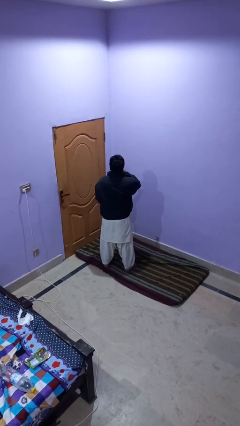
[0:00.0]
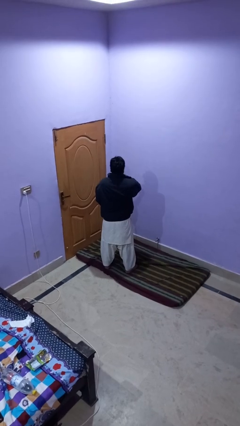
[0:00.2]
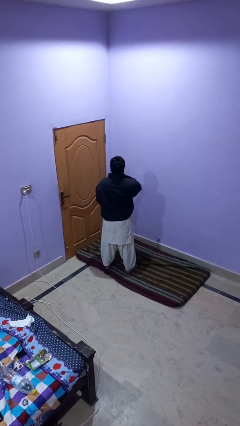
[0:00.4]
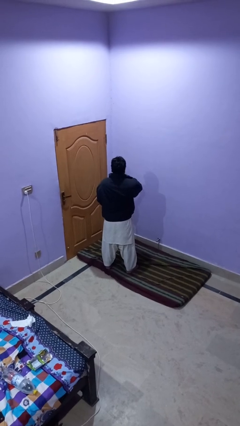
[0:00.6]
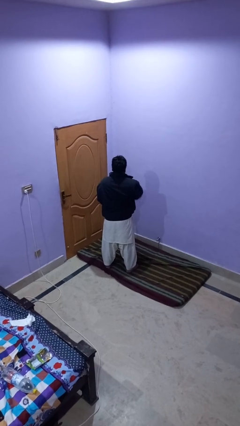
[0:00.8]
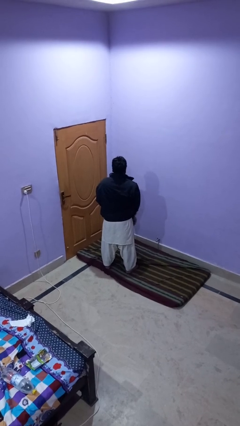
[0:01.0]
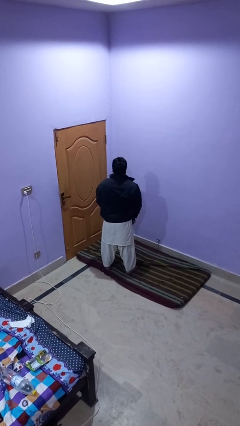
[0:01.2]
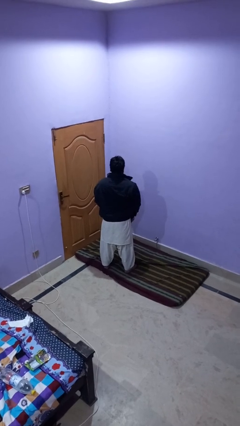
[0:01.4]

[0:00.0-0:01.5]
person unzips jacket

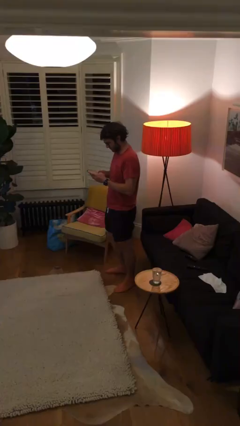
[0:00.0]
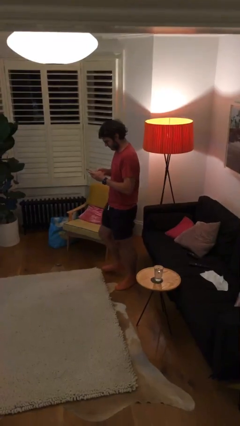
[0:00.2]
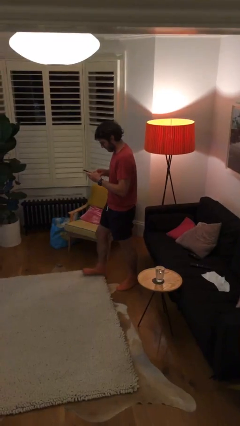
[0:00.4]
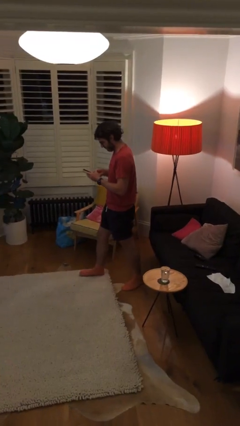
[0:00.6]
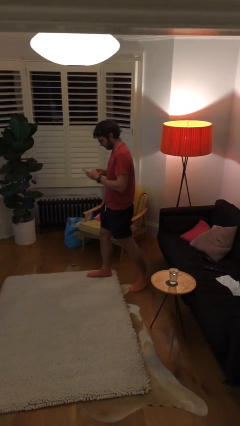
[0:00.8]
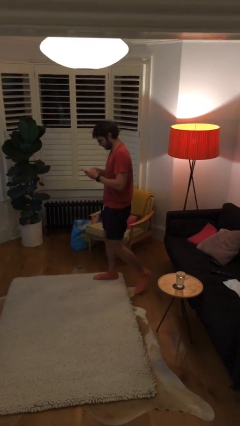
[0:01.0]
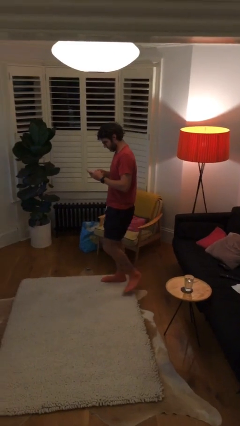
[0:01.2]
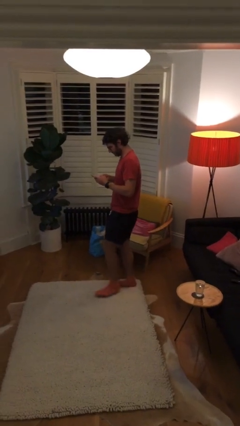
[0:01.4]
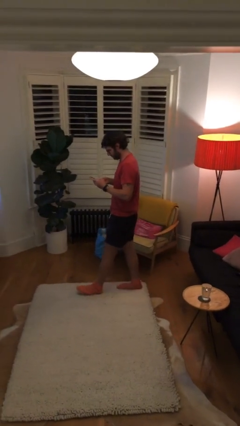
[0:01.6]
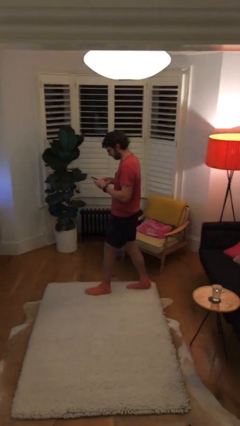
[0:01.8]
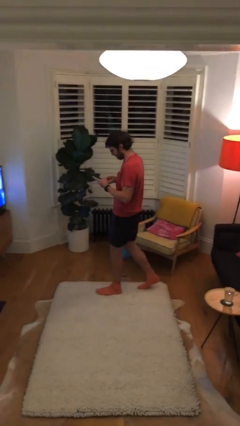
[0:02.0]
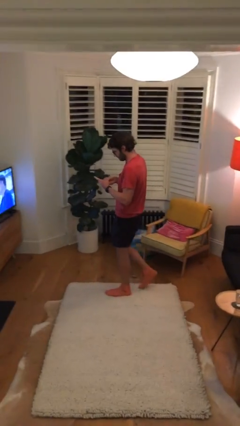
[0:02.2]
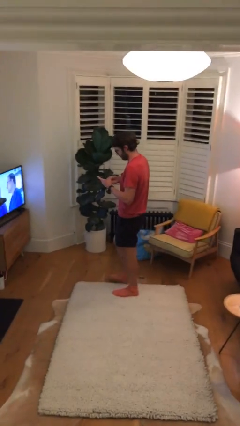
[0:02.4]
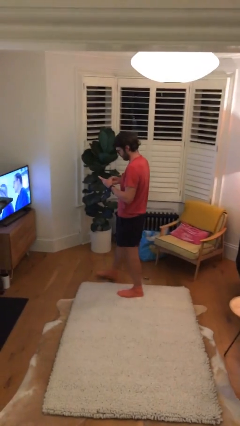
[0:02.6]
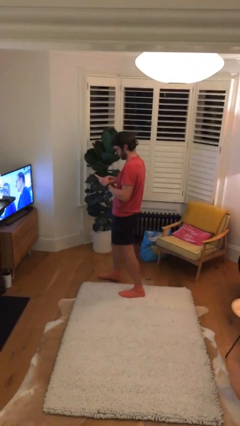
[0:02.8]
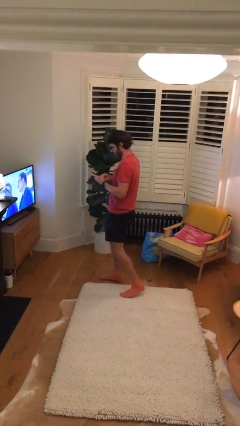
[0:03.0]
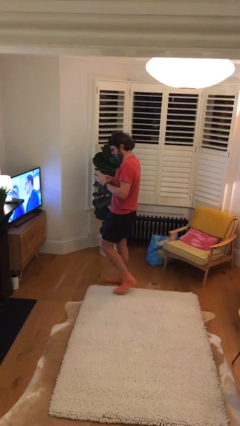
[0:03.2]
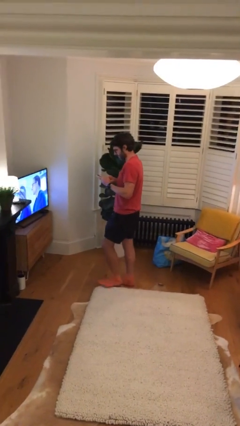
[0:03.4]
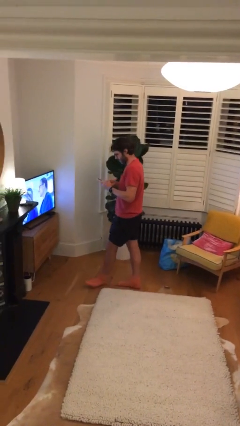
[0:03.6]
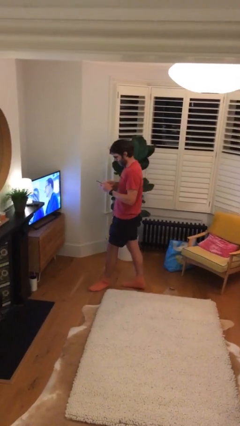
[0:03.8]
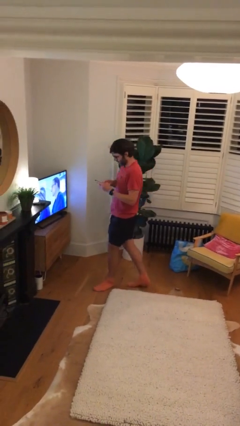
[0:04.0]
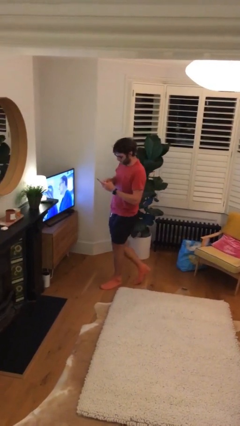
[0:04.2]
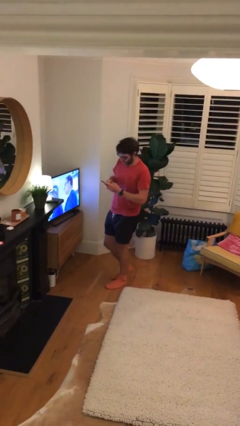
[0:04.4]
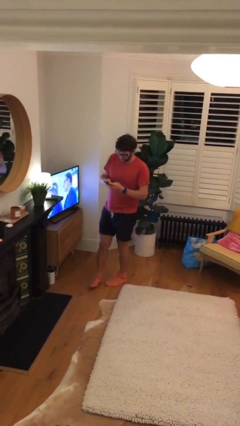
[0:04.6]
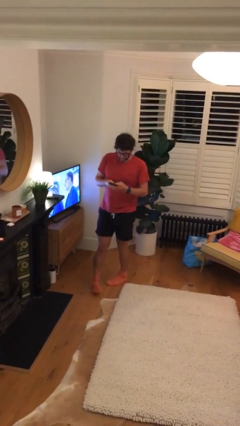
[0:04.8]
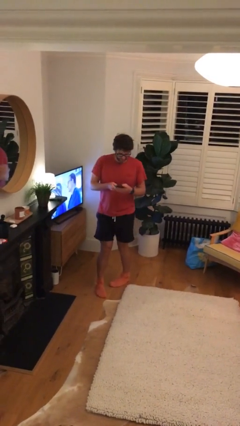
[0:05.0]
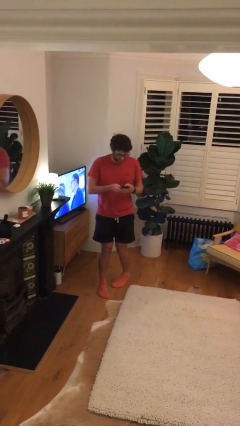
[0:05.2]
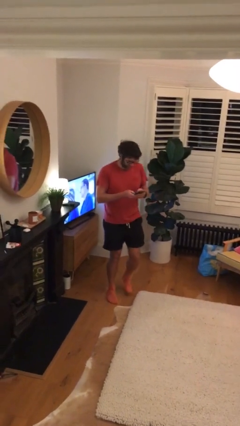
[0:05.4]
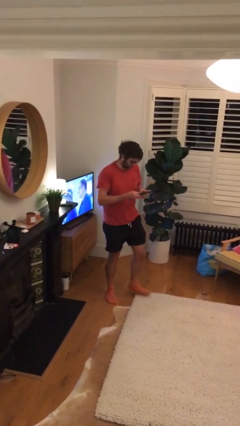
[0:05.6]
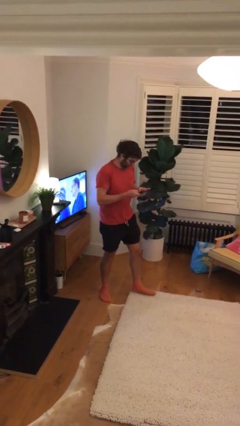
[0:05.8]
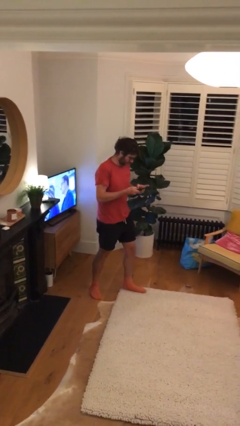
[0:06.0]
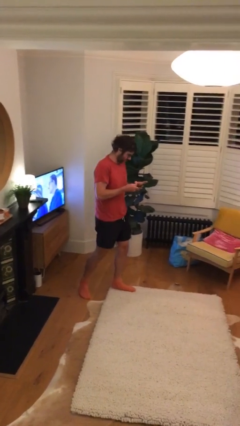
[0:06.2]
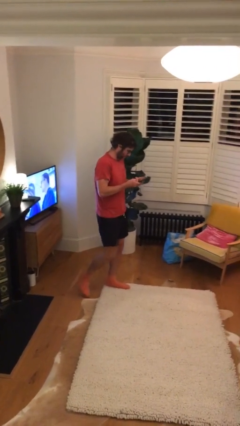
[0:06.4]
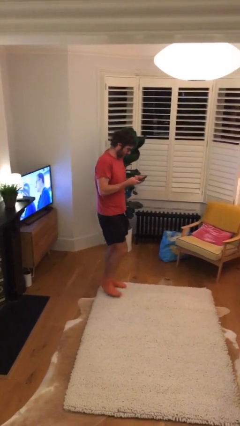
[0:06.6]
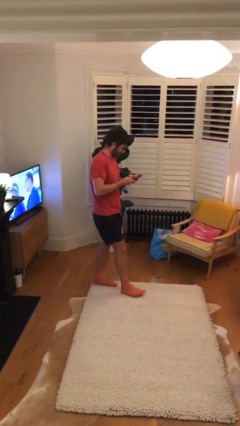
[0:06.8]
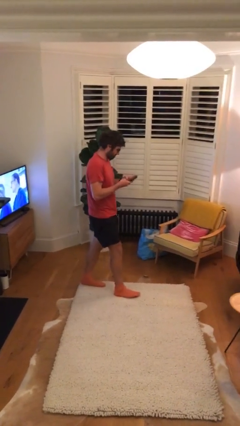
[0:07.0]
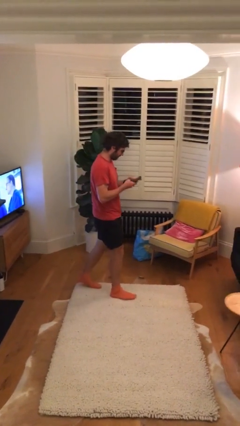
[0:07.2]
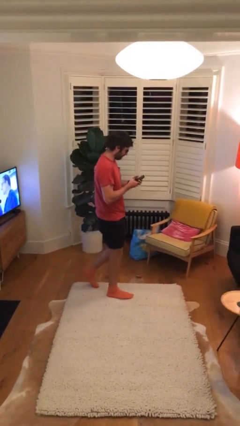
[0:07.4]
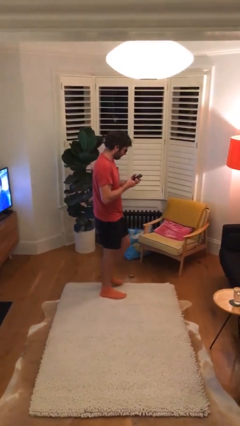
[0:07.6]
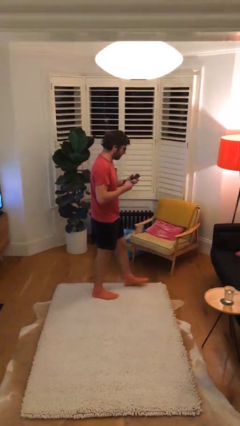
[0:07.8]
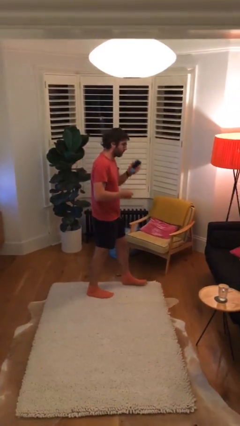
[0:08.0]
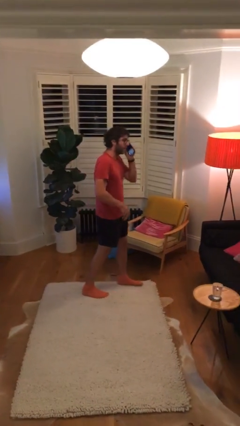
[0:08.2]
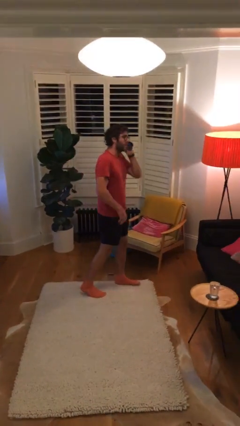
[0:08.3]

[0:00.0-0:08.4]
person texts on phone

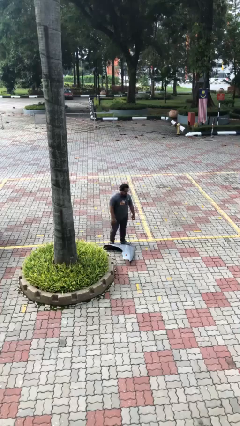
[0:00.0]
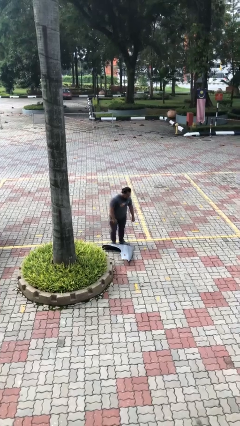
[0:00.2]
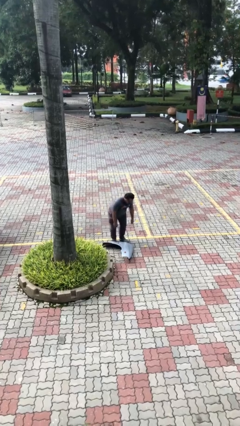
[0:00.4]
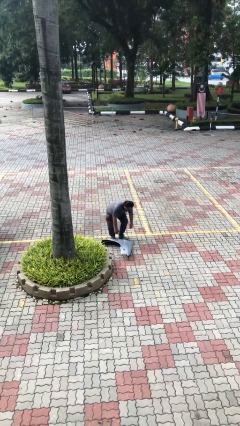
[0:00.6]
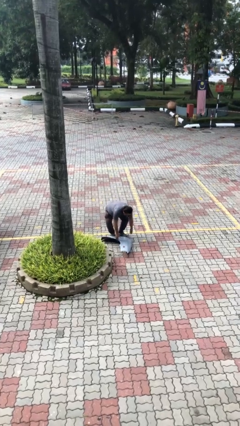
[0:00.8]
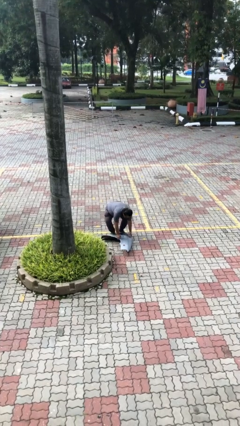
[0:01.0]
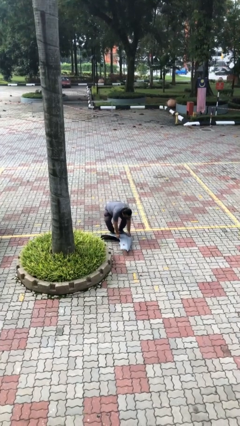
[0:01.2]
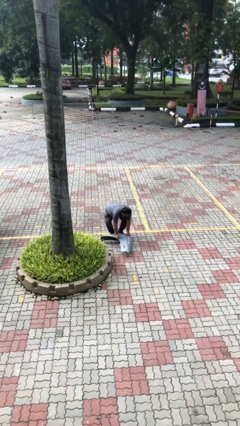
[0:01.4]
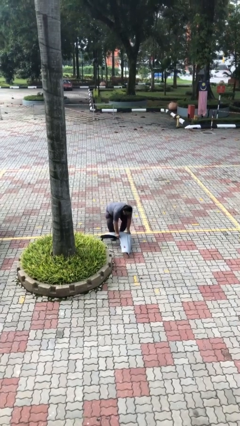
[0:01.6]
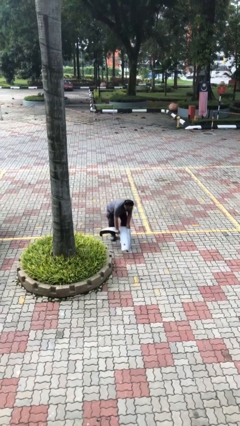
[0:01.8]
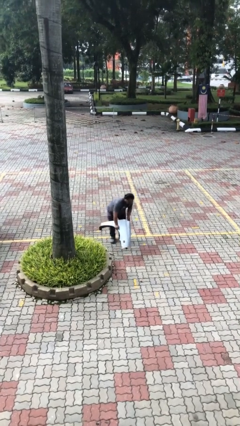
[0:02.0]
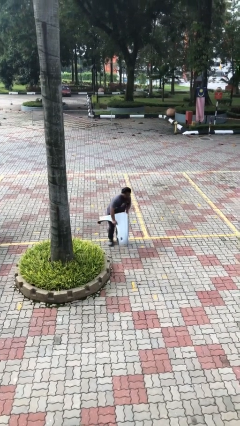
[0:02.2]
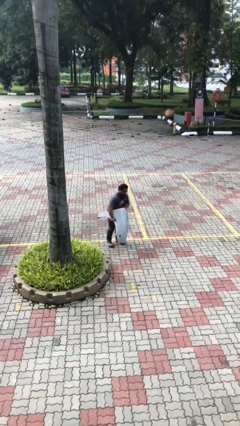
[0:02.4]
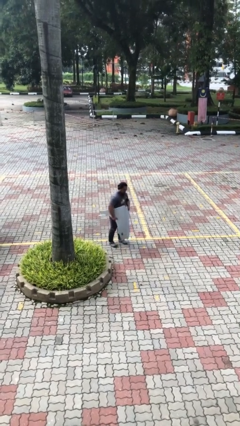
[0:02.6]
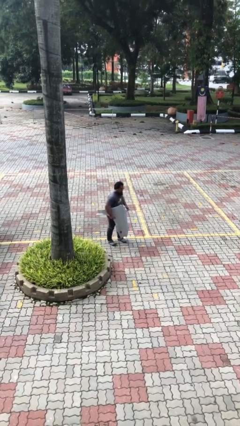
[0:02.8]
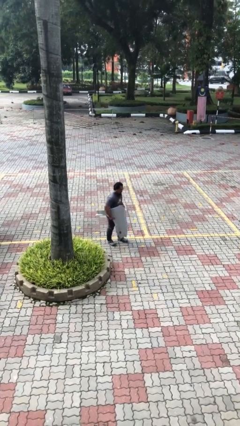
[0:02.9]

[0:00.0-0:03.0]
person picks up object from floor

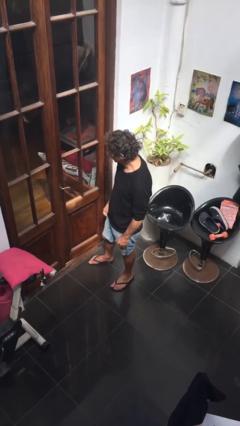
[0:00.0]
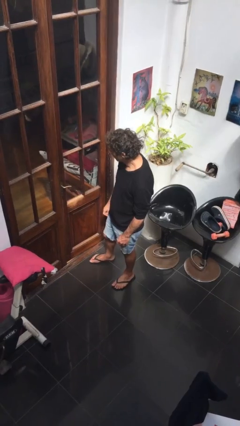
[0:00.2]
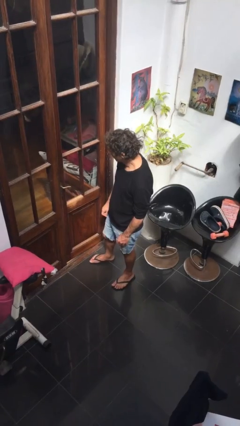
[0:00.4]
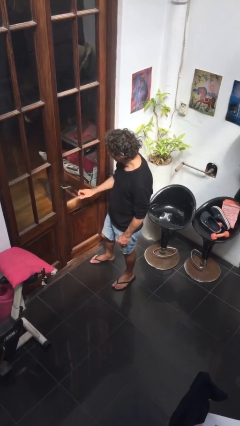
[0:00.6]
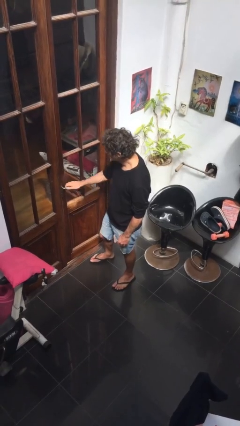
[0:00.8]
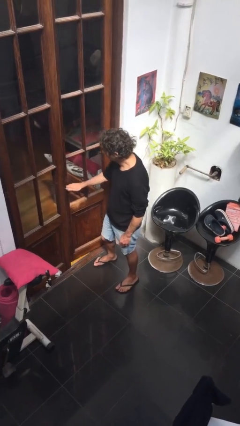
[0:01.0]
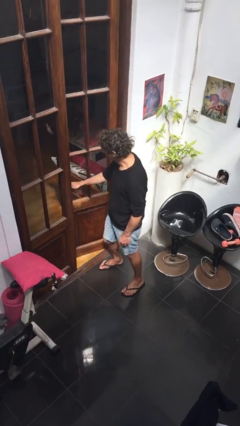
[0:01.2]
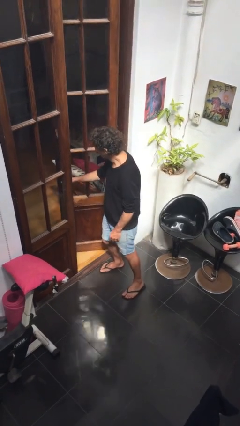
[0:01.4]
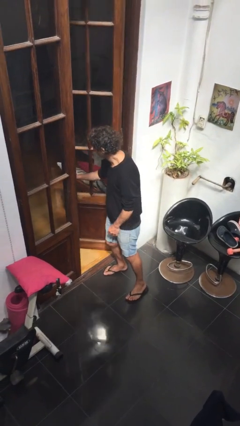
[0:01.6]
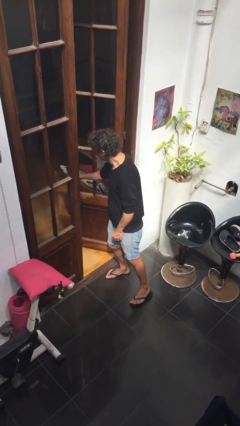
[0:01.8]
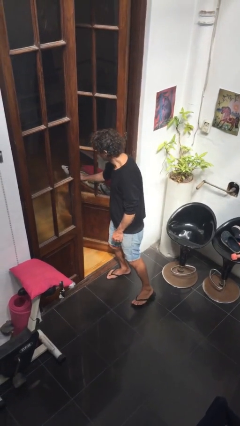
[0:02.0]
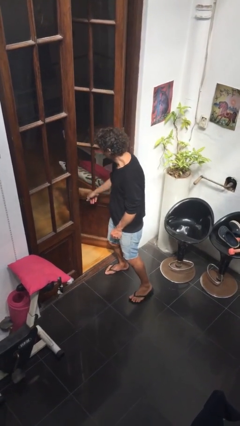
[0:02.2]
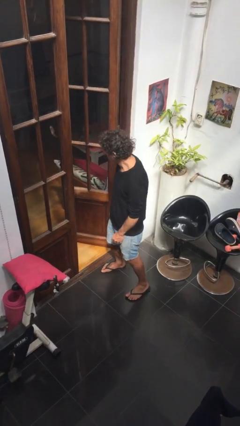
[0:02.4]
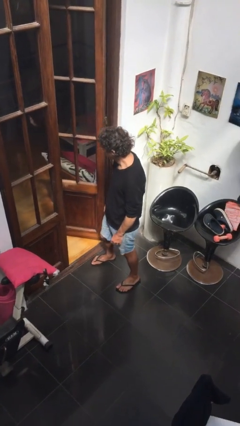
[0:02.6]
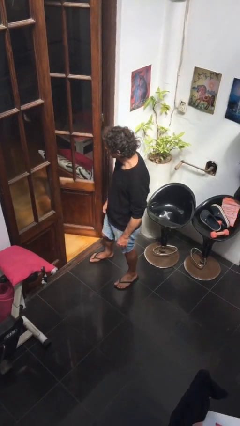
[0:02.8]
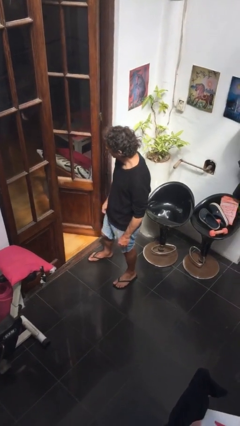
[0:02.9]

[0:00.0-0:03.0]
person opens facility door

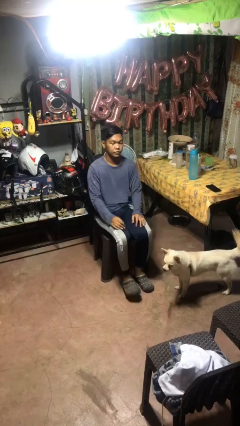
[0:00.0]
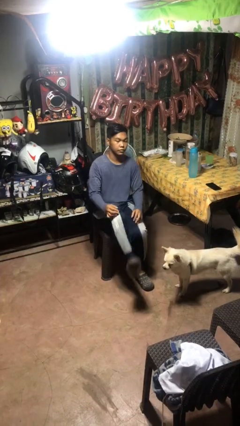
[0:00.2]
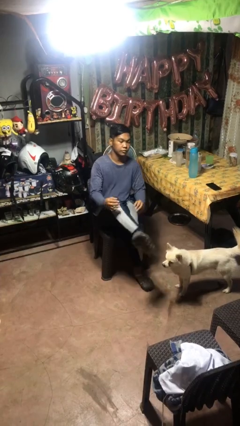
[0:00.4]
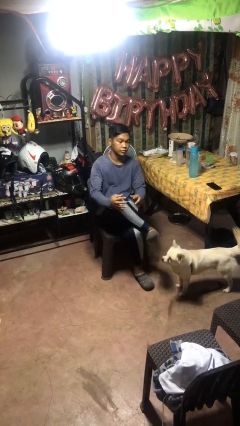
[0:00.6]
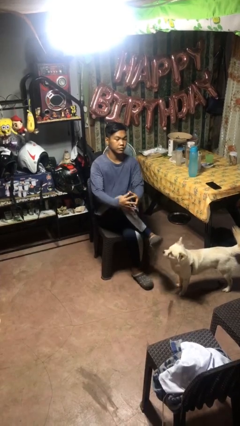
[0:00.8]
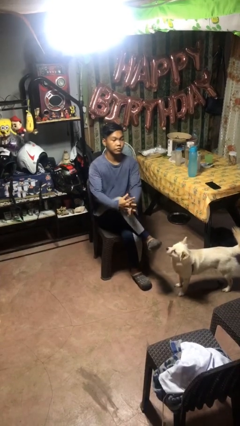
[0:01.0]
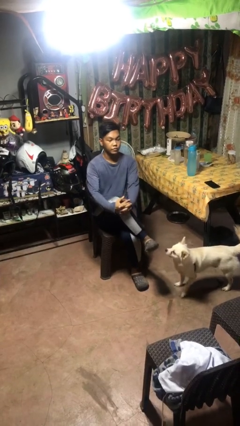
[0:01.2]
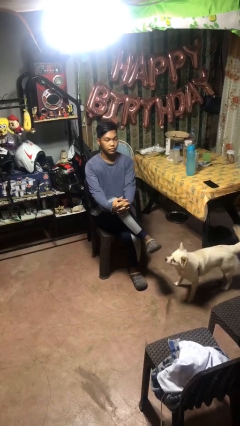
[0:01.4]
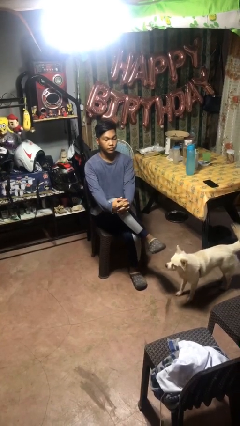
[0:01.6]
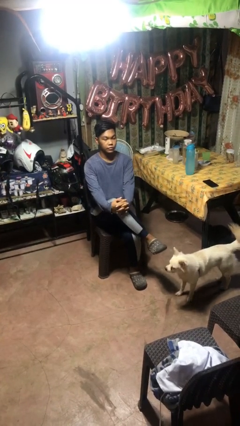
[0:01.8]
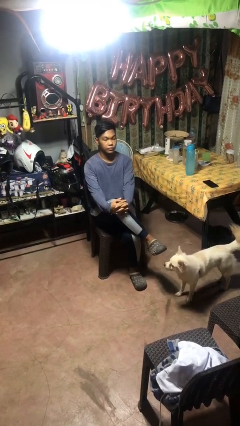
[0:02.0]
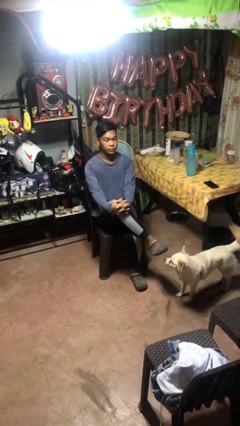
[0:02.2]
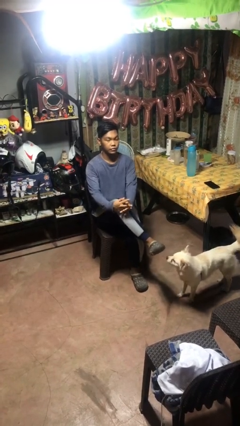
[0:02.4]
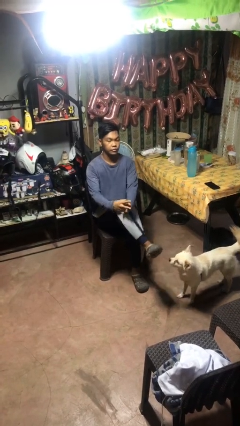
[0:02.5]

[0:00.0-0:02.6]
person crosses legs
